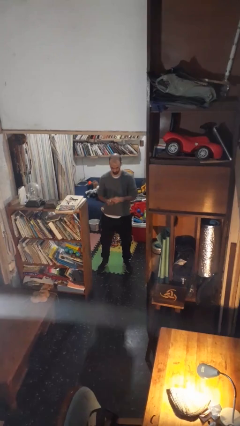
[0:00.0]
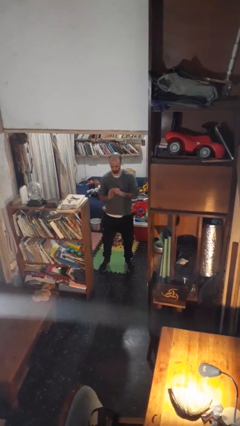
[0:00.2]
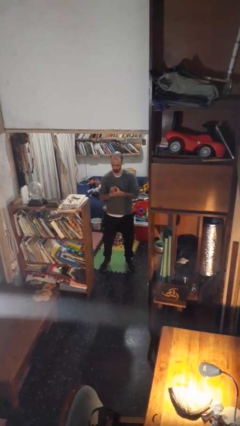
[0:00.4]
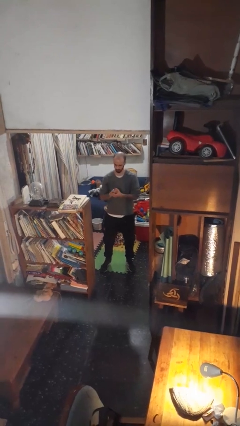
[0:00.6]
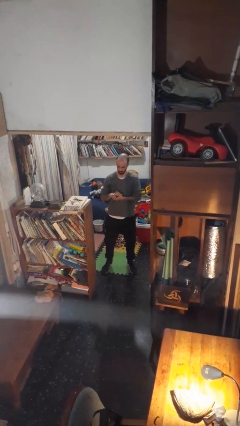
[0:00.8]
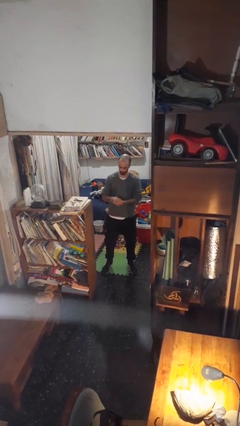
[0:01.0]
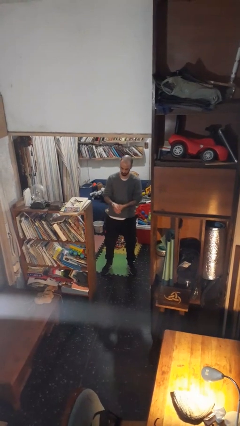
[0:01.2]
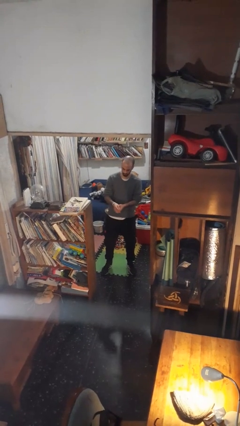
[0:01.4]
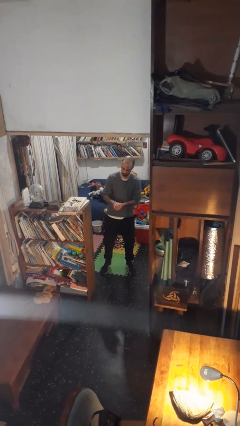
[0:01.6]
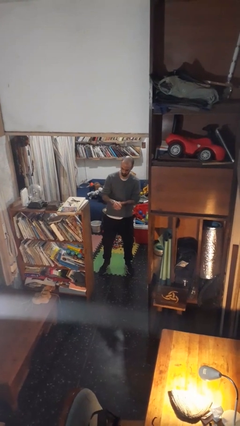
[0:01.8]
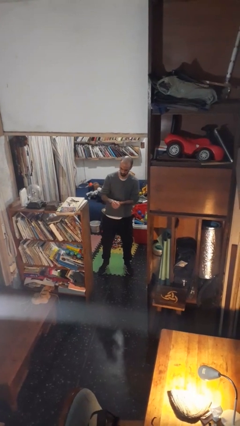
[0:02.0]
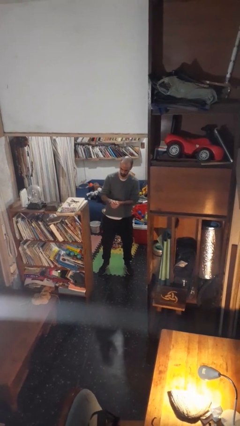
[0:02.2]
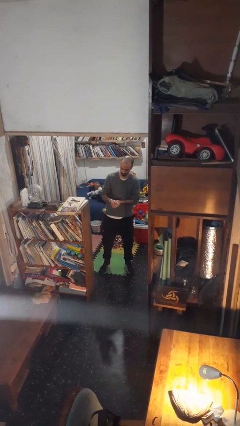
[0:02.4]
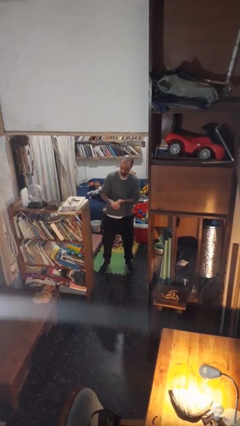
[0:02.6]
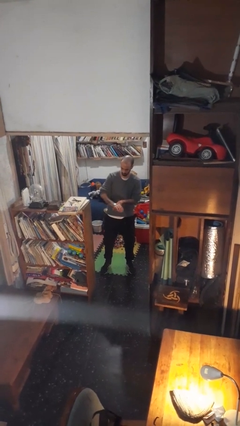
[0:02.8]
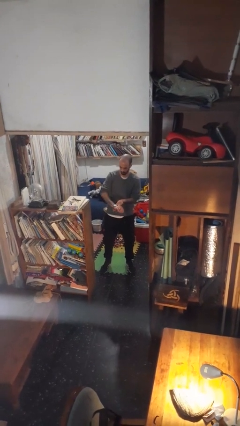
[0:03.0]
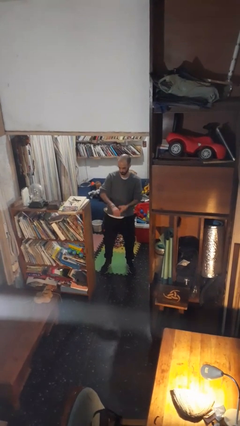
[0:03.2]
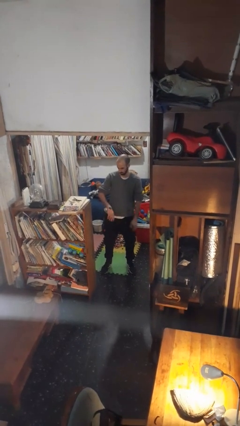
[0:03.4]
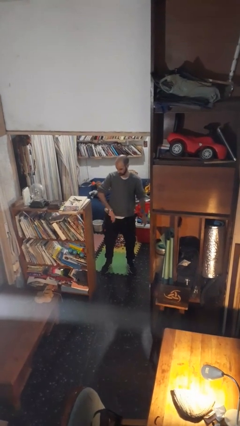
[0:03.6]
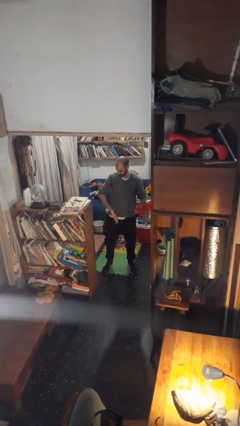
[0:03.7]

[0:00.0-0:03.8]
person puts on wristwatch

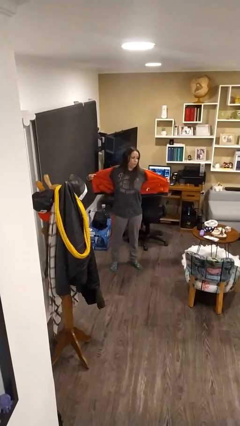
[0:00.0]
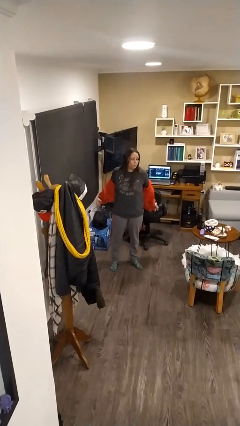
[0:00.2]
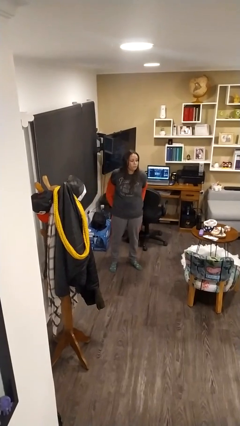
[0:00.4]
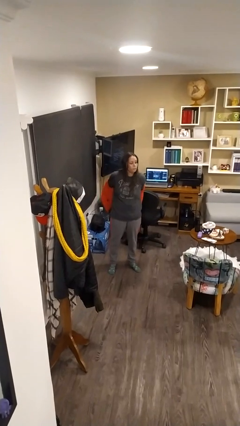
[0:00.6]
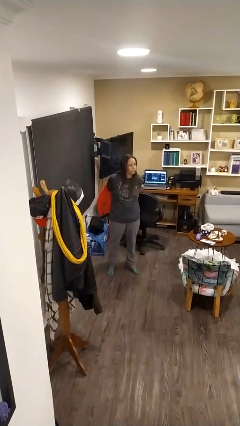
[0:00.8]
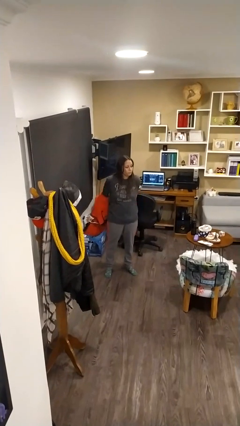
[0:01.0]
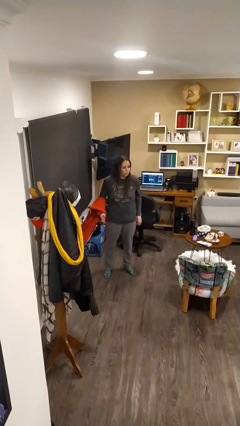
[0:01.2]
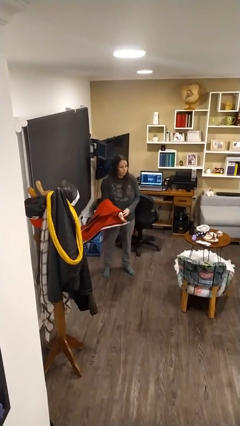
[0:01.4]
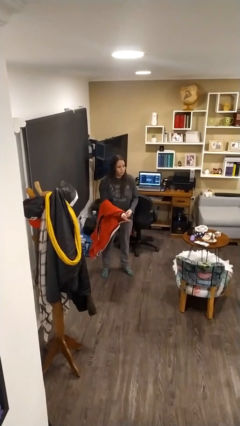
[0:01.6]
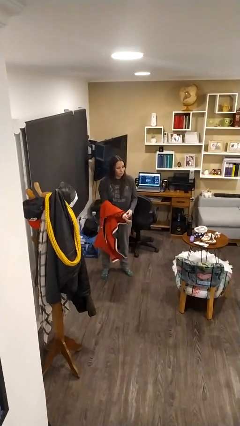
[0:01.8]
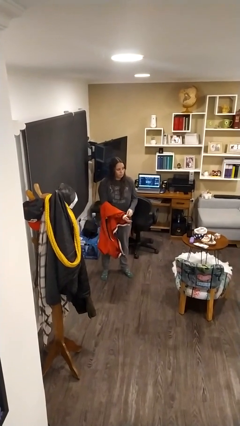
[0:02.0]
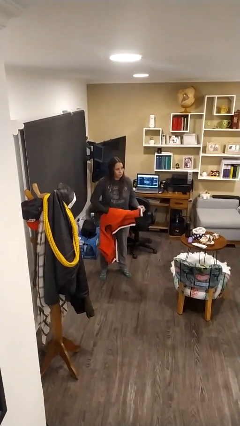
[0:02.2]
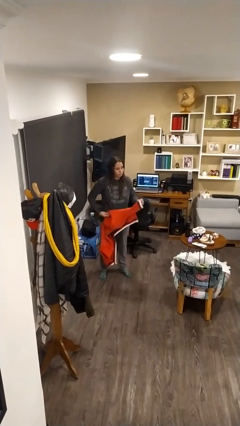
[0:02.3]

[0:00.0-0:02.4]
person takes off jacket

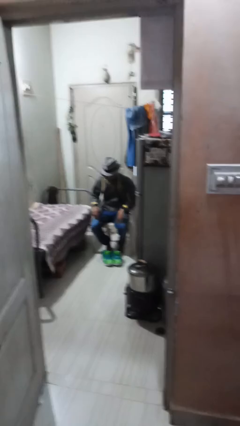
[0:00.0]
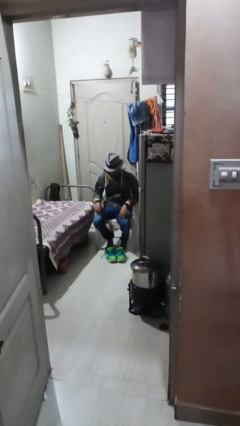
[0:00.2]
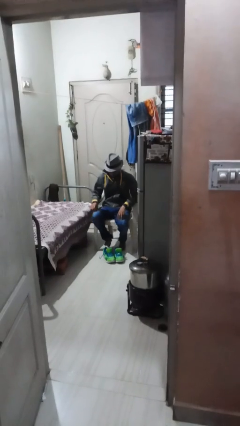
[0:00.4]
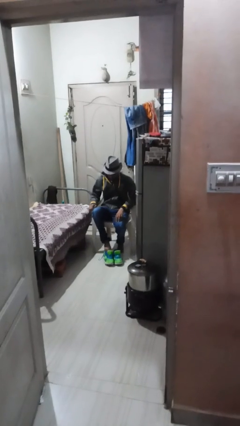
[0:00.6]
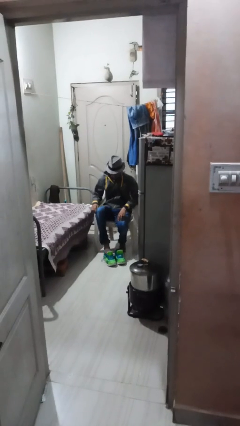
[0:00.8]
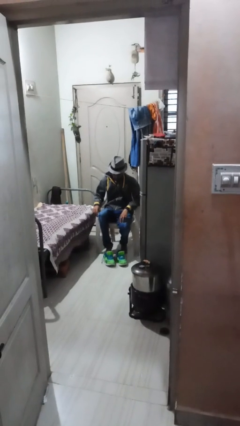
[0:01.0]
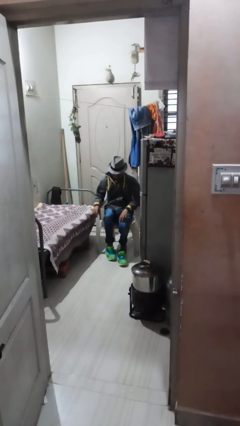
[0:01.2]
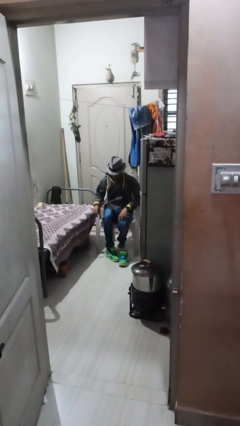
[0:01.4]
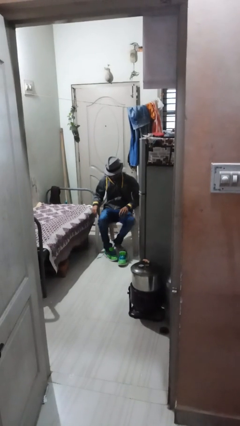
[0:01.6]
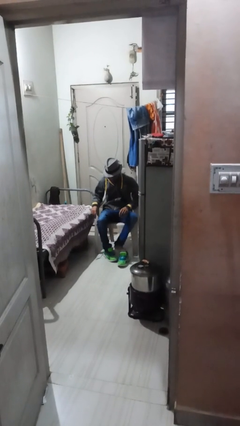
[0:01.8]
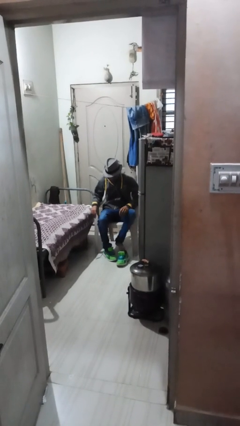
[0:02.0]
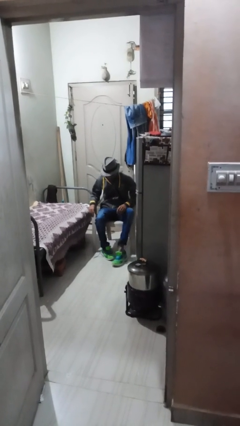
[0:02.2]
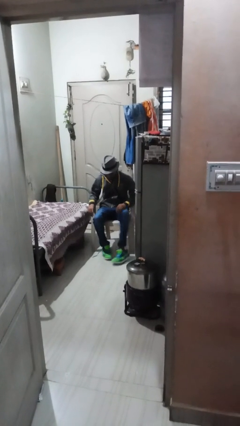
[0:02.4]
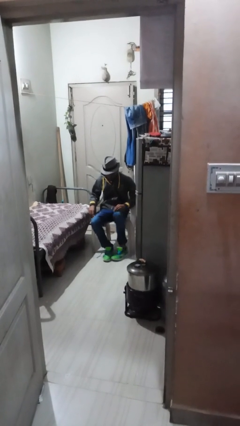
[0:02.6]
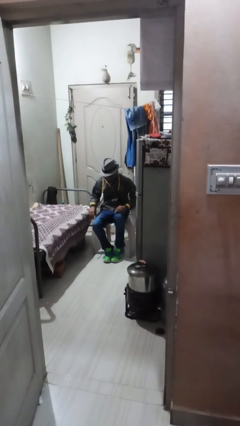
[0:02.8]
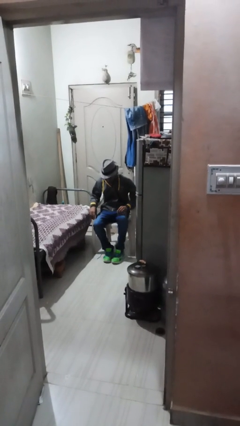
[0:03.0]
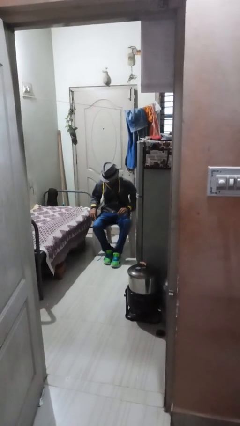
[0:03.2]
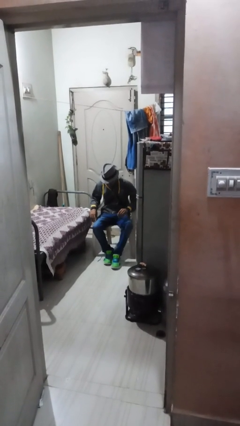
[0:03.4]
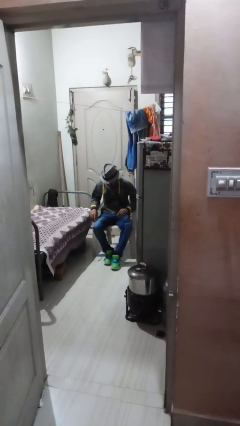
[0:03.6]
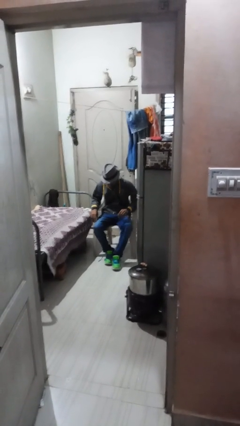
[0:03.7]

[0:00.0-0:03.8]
person puts on shoes

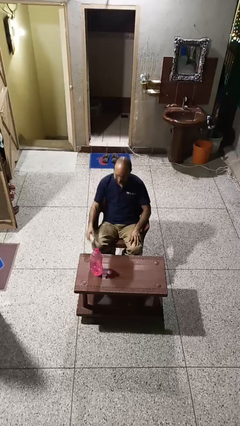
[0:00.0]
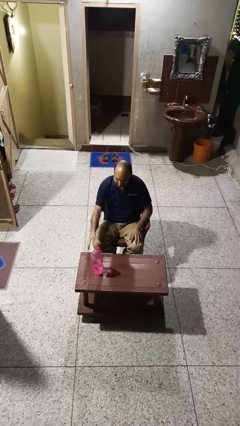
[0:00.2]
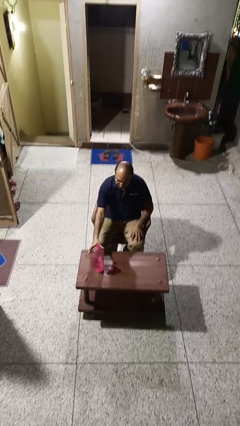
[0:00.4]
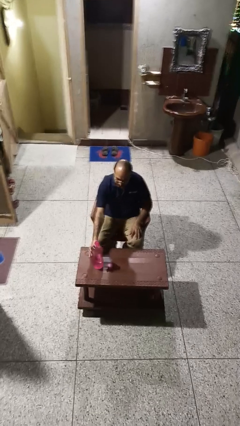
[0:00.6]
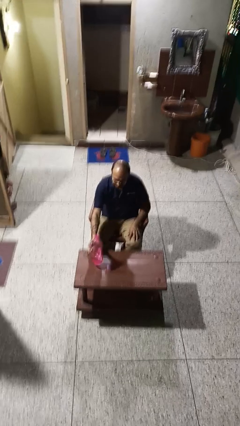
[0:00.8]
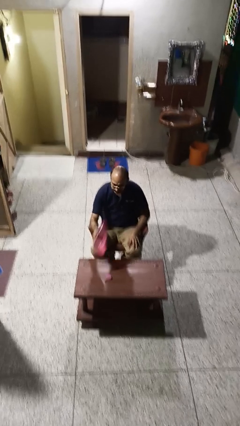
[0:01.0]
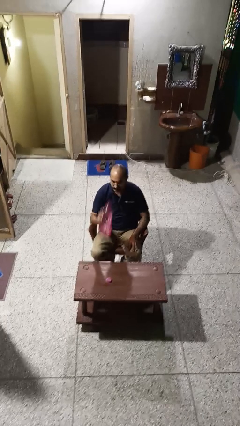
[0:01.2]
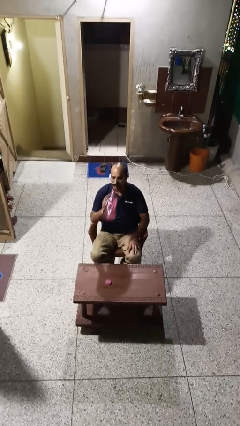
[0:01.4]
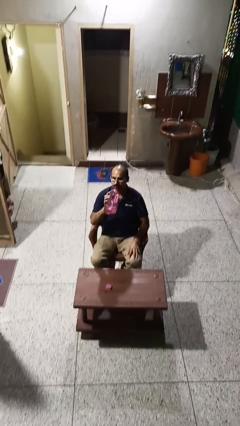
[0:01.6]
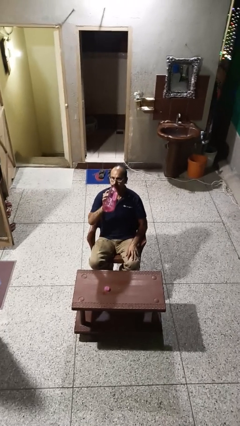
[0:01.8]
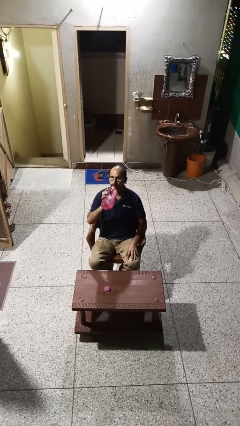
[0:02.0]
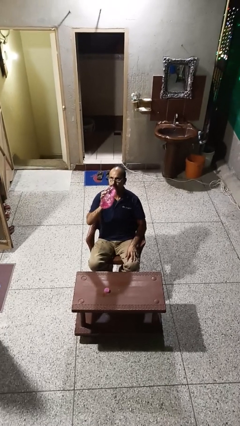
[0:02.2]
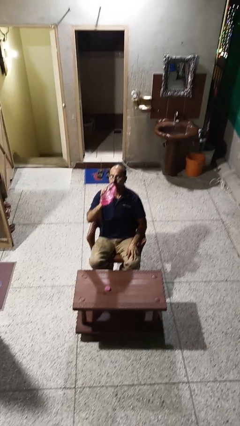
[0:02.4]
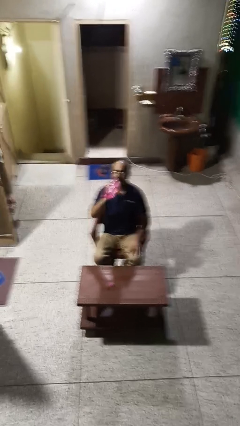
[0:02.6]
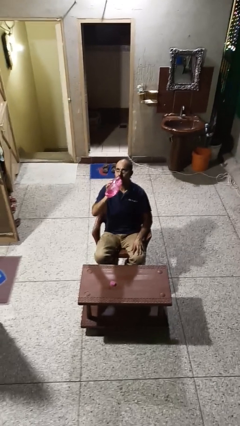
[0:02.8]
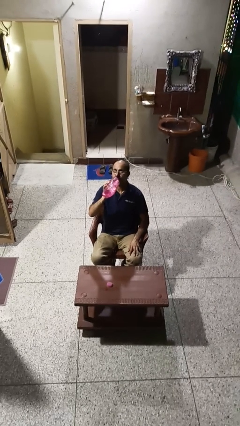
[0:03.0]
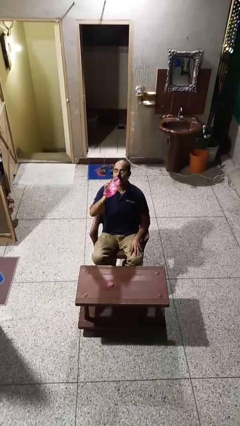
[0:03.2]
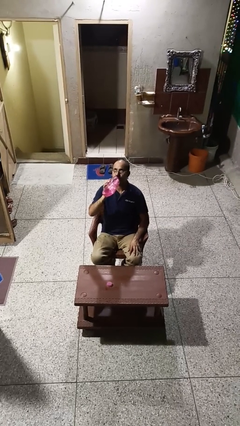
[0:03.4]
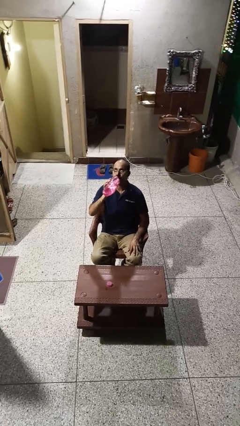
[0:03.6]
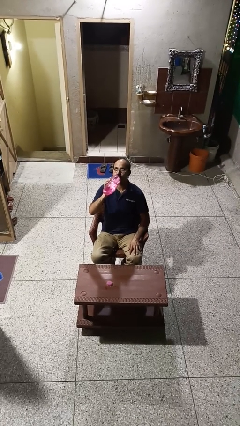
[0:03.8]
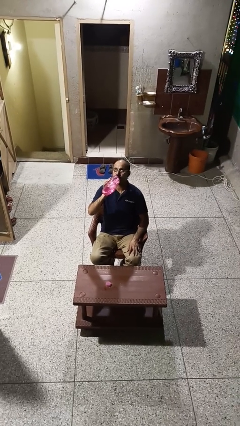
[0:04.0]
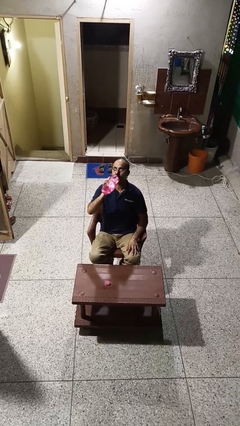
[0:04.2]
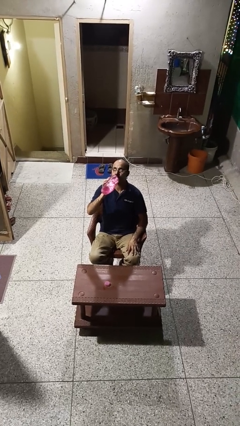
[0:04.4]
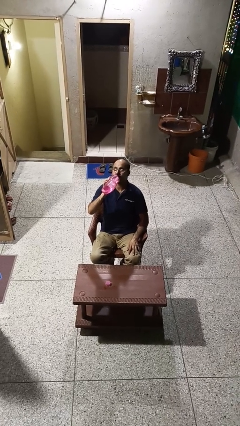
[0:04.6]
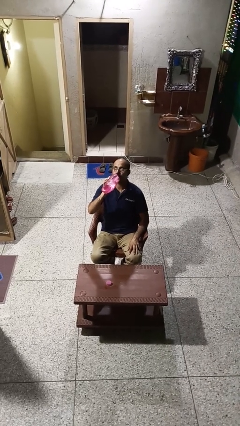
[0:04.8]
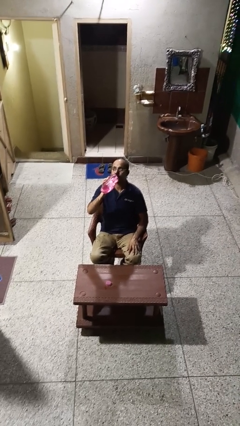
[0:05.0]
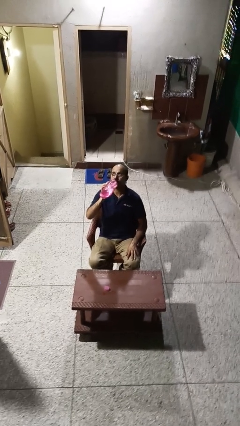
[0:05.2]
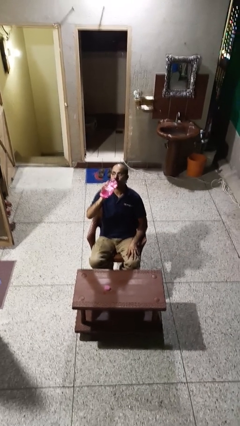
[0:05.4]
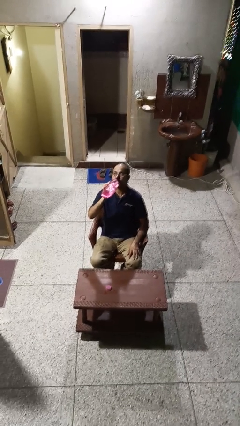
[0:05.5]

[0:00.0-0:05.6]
person drinks from bottle

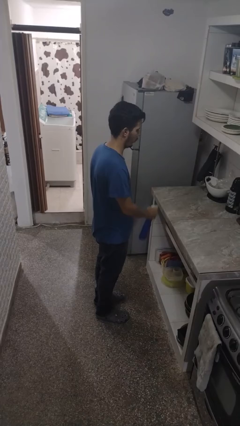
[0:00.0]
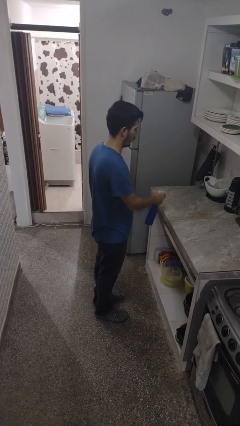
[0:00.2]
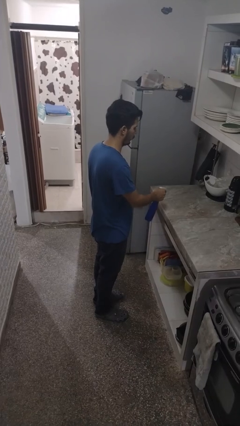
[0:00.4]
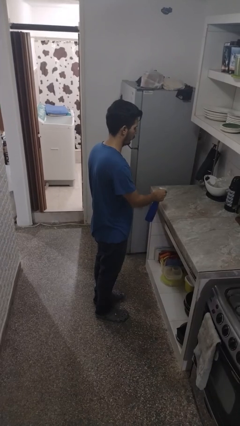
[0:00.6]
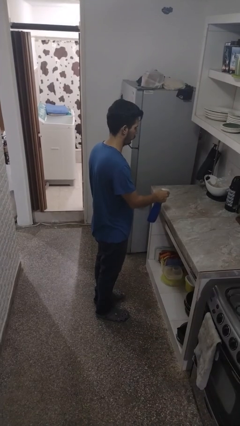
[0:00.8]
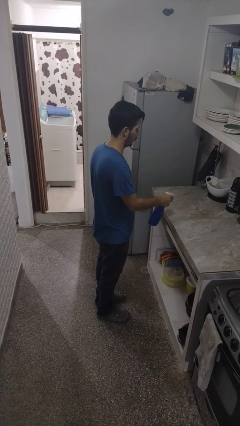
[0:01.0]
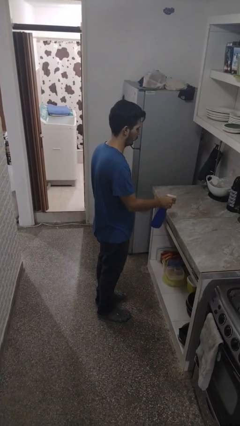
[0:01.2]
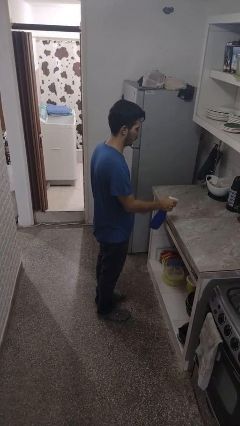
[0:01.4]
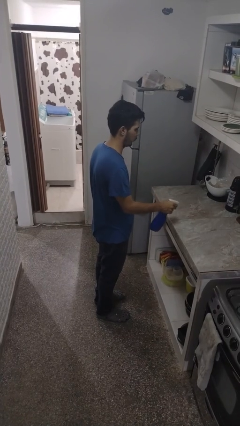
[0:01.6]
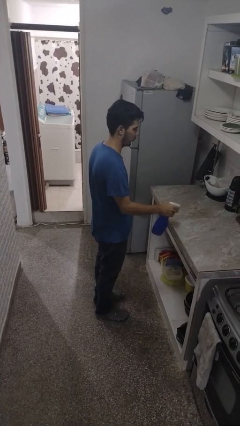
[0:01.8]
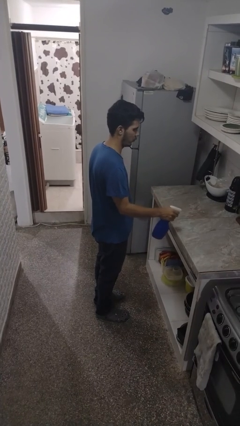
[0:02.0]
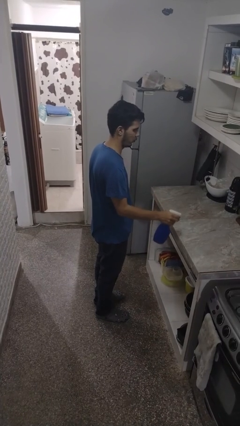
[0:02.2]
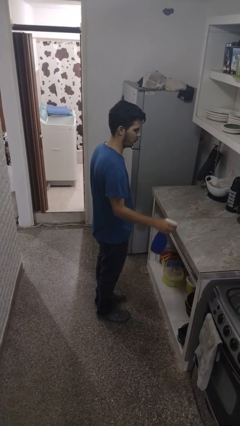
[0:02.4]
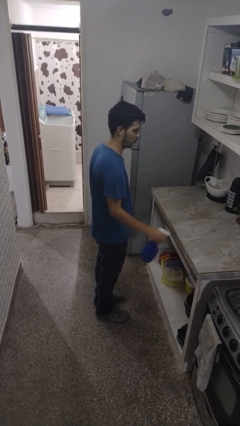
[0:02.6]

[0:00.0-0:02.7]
person sprays from bottle
